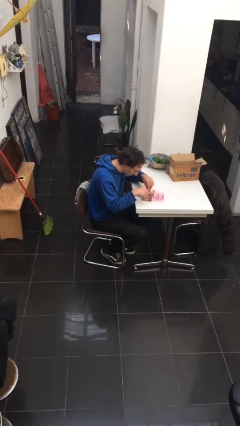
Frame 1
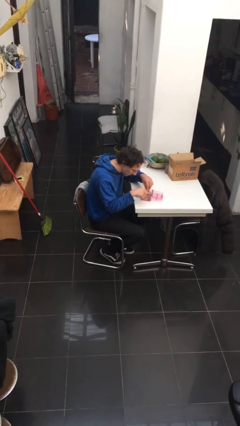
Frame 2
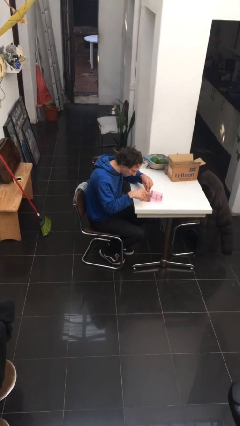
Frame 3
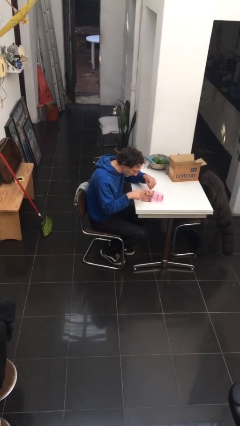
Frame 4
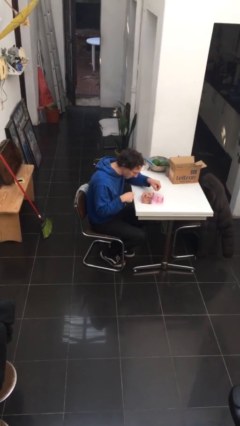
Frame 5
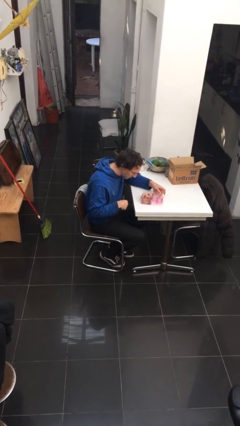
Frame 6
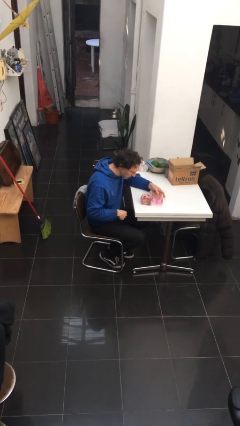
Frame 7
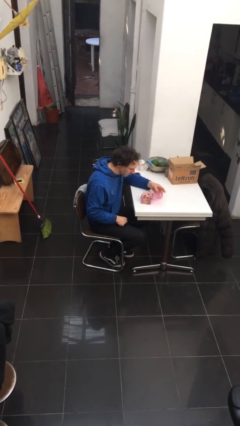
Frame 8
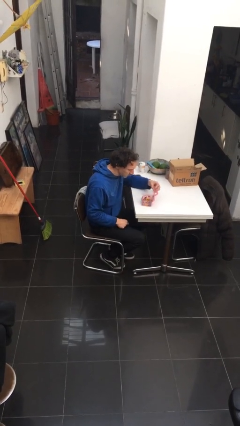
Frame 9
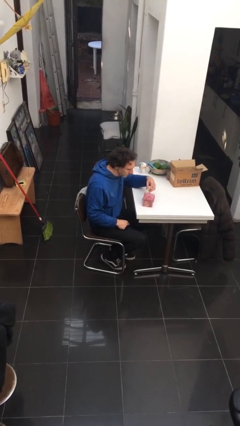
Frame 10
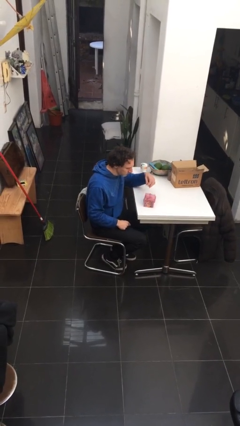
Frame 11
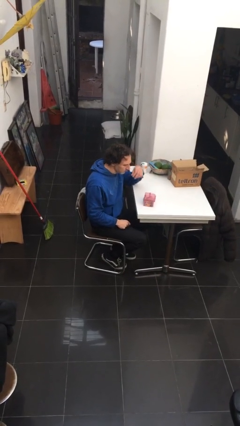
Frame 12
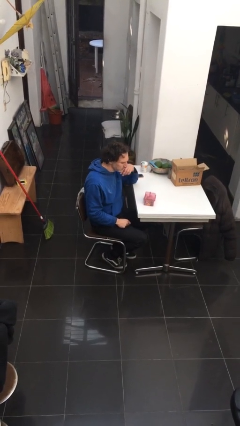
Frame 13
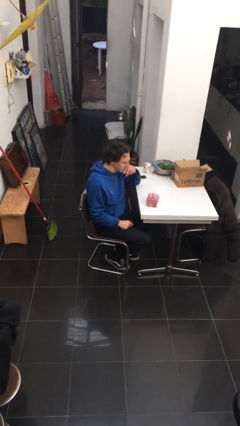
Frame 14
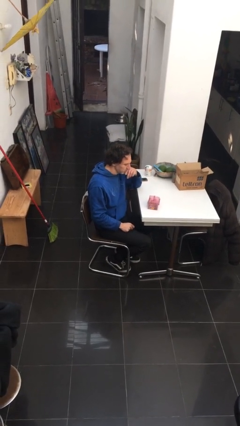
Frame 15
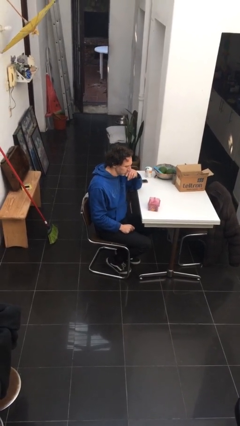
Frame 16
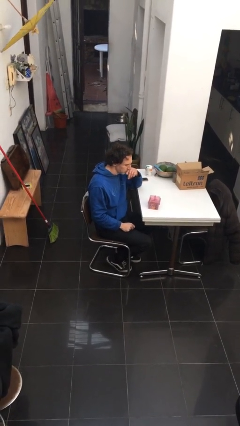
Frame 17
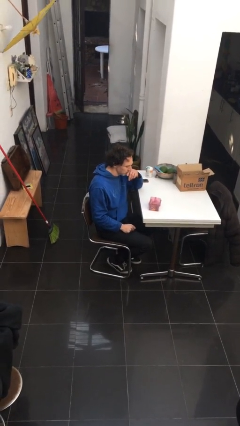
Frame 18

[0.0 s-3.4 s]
person closes jewelry box

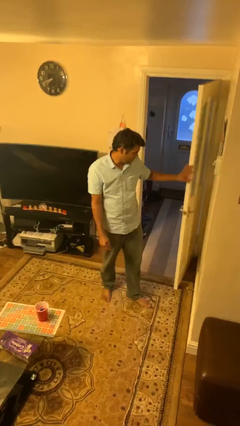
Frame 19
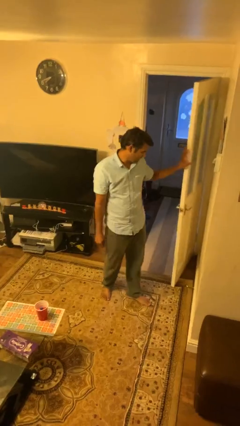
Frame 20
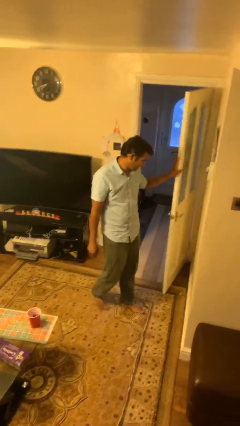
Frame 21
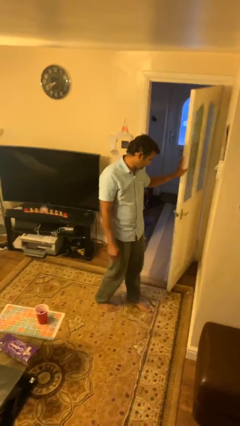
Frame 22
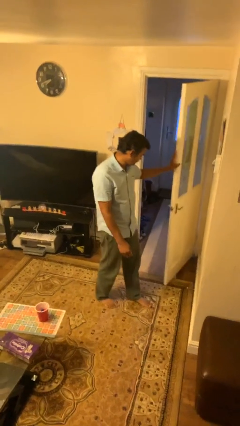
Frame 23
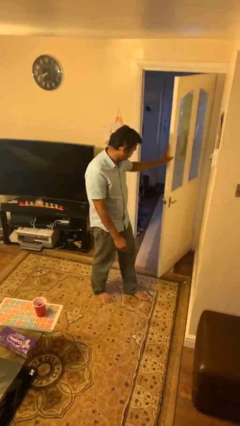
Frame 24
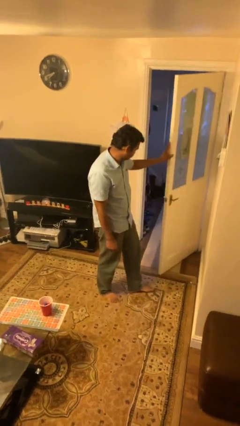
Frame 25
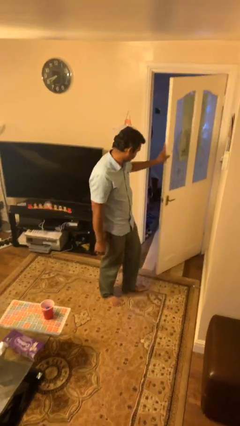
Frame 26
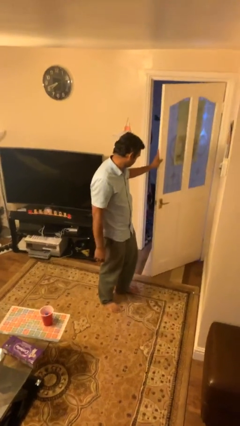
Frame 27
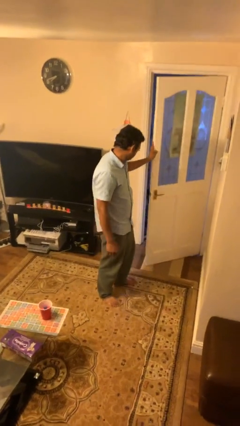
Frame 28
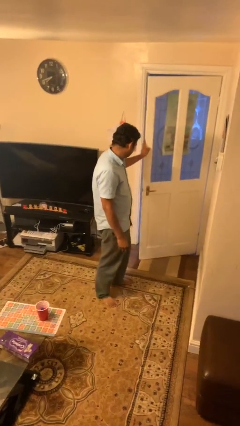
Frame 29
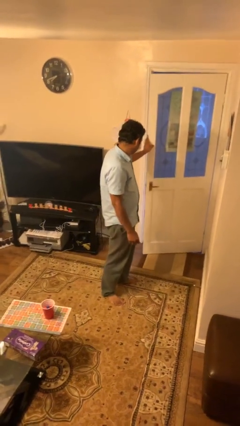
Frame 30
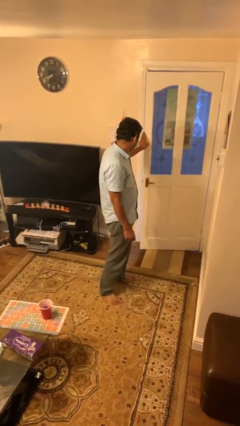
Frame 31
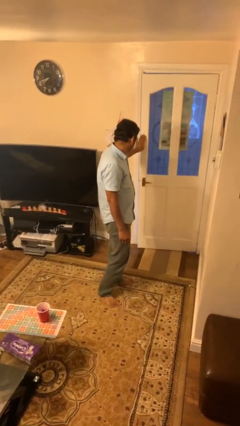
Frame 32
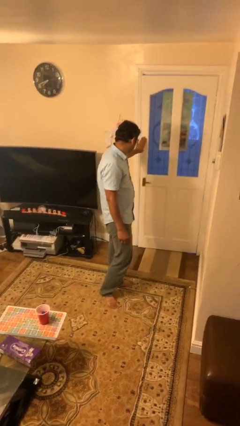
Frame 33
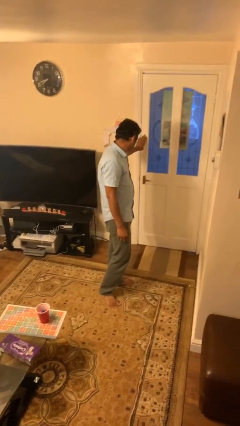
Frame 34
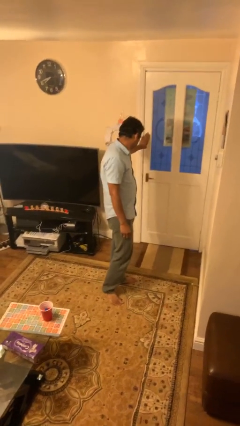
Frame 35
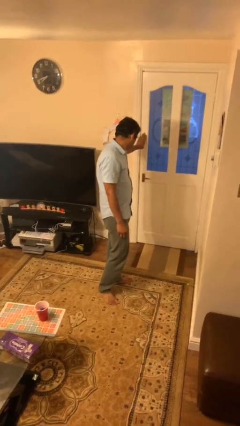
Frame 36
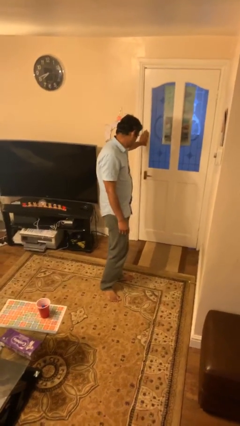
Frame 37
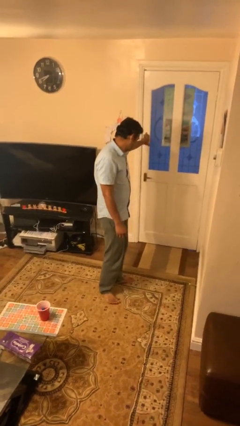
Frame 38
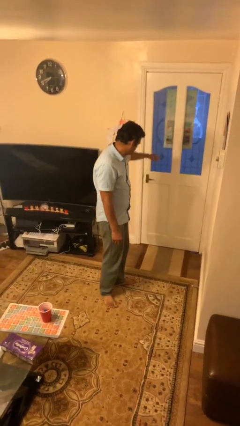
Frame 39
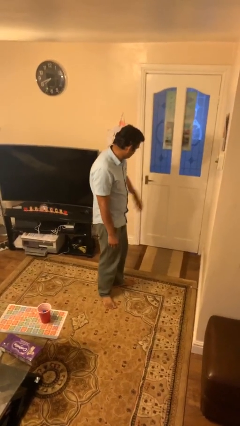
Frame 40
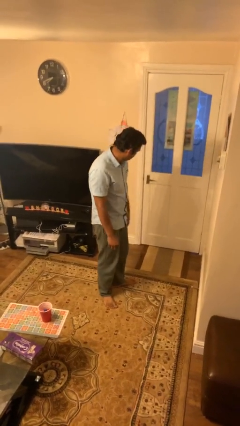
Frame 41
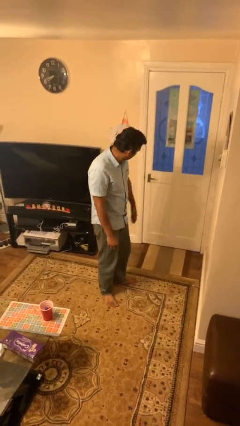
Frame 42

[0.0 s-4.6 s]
person closes facility door

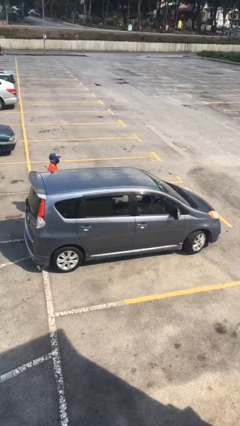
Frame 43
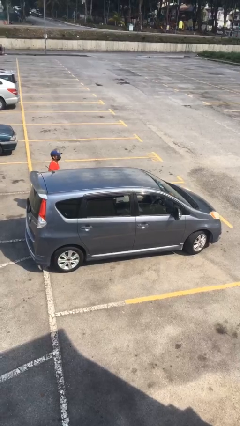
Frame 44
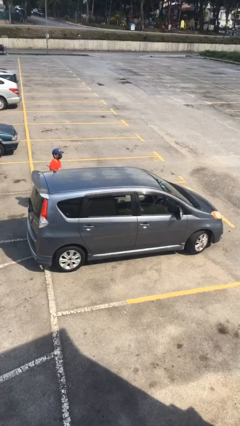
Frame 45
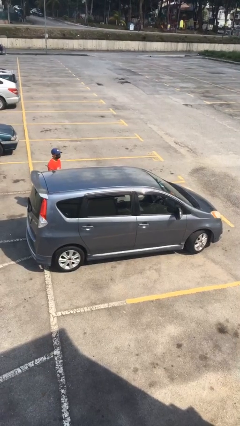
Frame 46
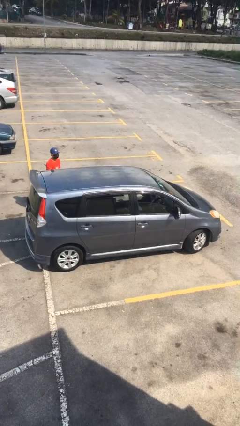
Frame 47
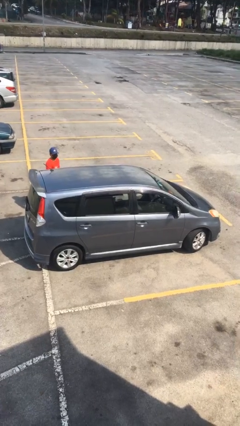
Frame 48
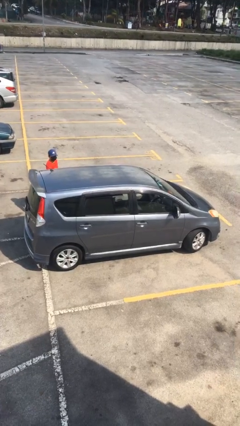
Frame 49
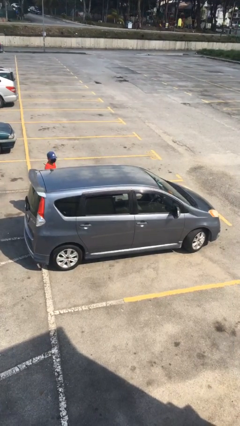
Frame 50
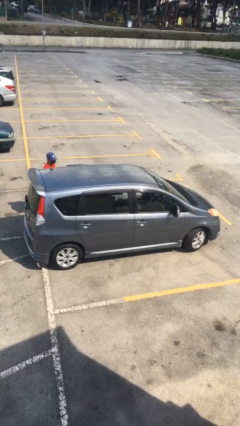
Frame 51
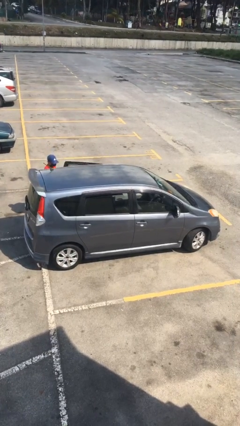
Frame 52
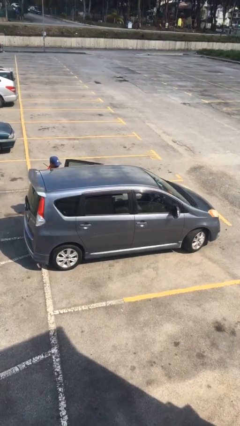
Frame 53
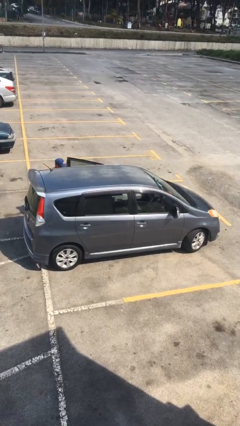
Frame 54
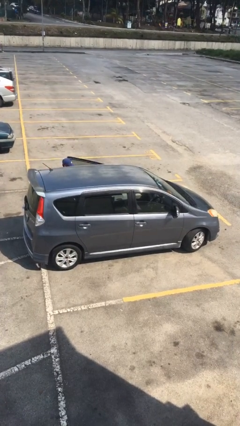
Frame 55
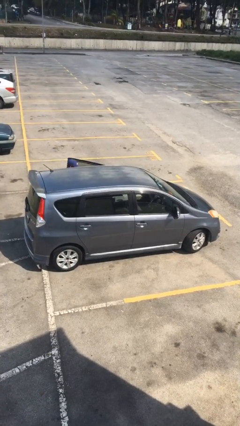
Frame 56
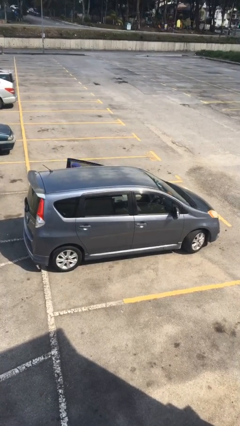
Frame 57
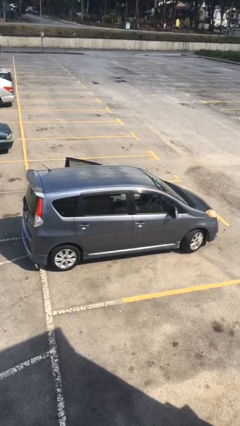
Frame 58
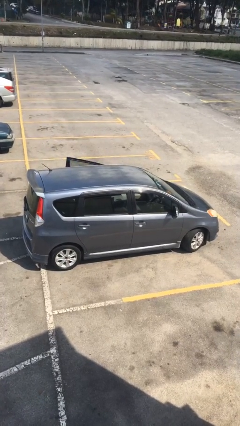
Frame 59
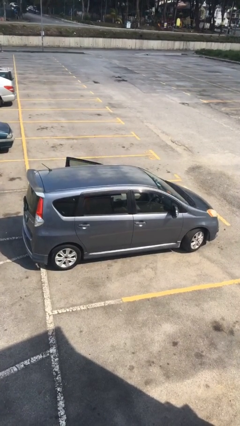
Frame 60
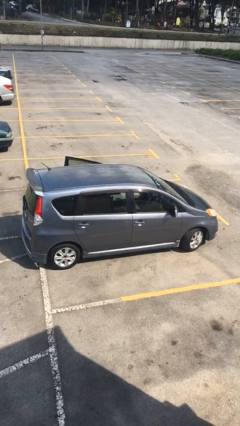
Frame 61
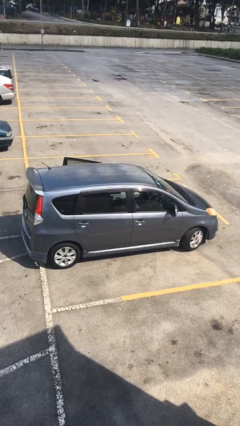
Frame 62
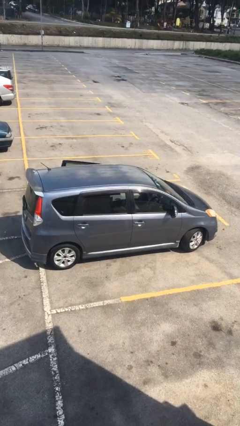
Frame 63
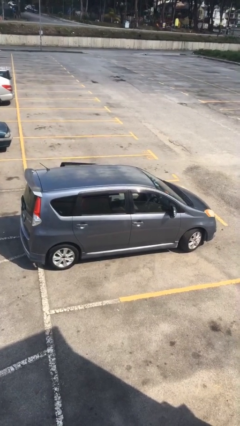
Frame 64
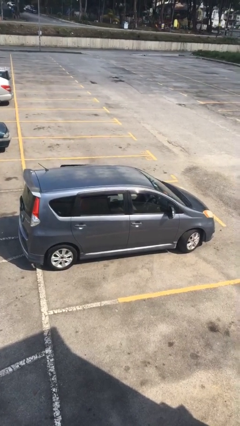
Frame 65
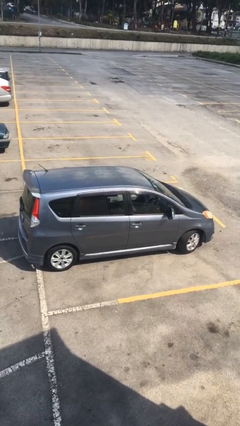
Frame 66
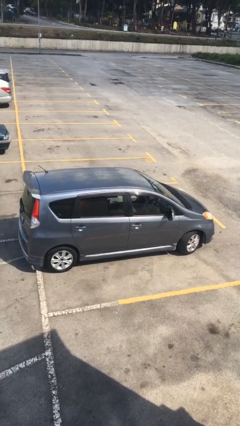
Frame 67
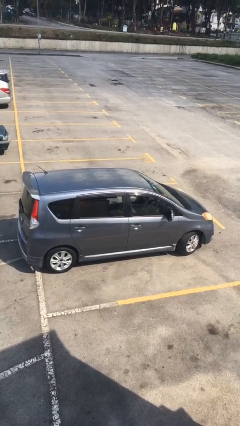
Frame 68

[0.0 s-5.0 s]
car picks up person

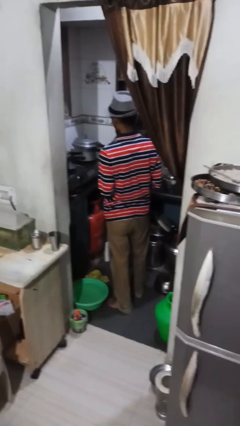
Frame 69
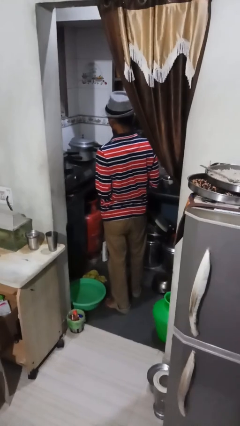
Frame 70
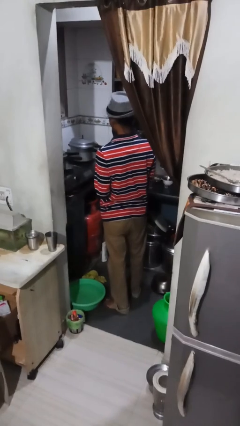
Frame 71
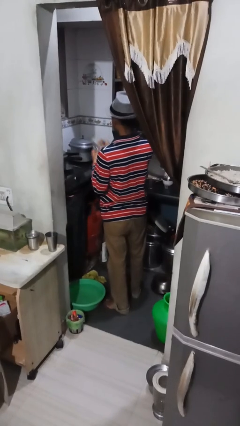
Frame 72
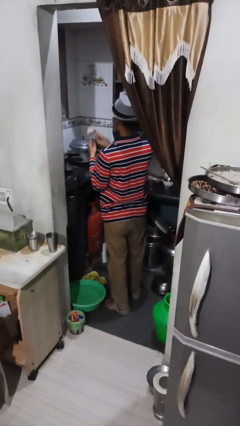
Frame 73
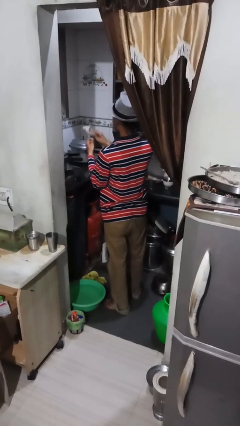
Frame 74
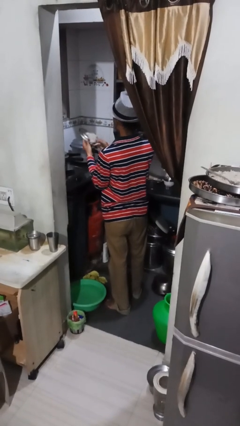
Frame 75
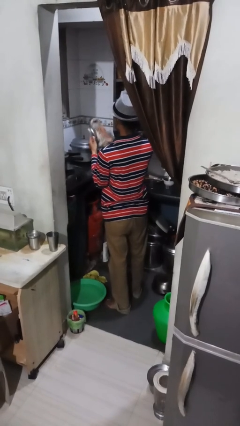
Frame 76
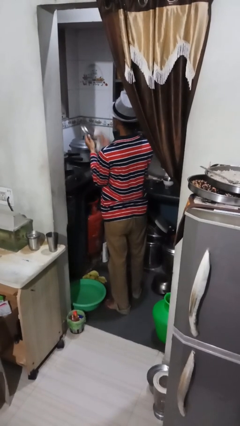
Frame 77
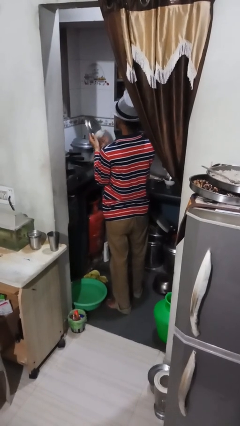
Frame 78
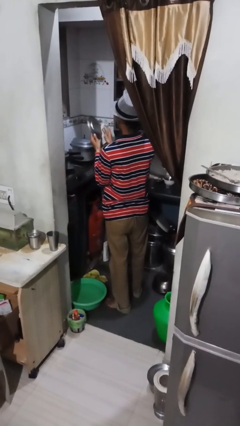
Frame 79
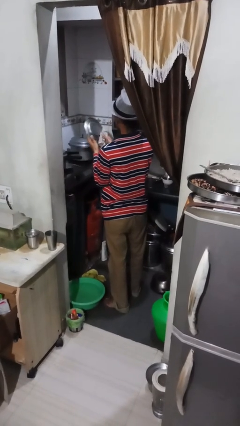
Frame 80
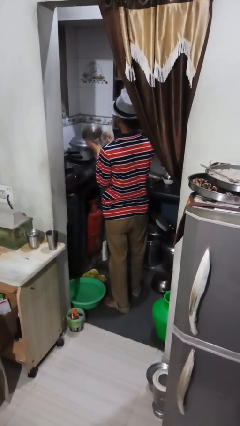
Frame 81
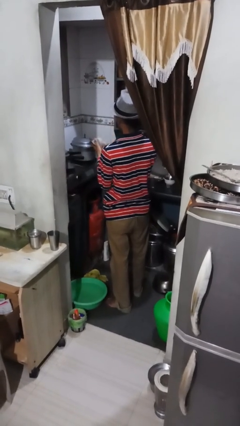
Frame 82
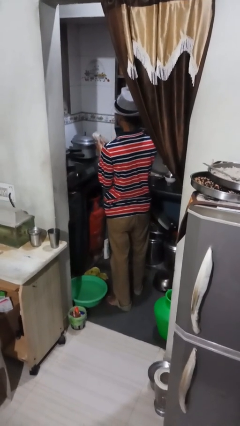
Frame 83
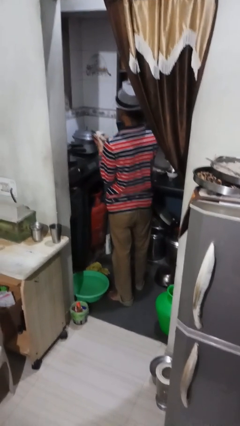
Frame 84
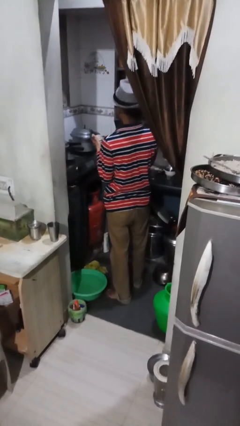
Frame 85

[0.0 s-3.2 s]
person dries dish

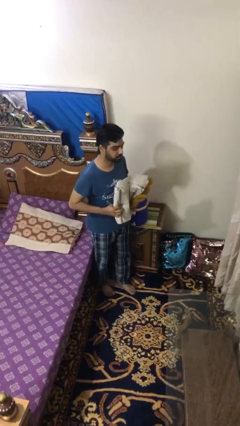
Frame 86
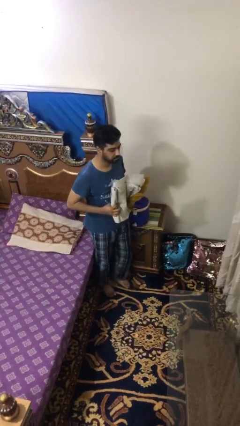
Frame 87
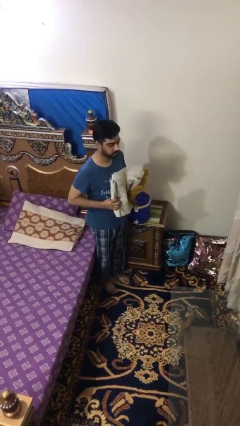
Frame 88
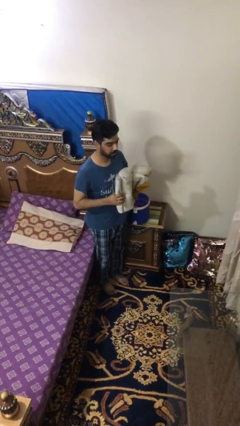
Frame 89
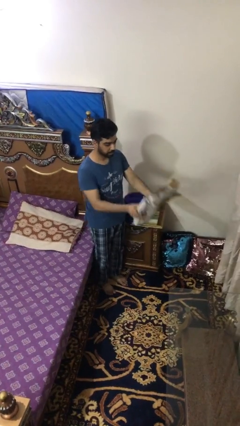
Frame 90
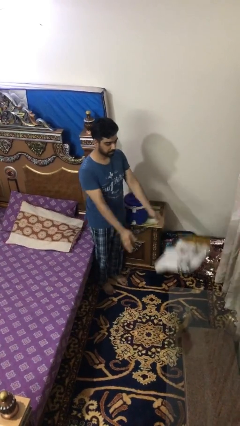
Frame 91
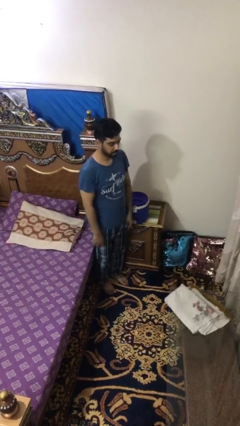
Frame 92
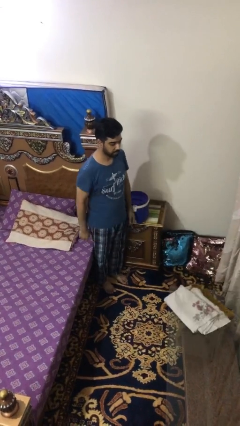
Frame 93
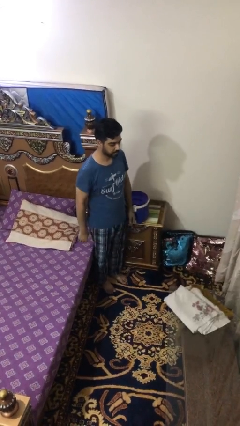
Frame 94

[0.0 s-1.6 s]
person throws object on table
